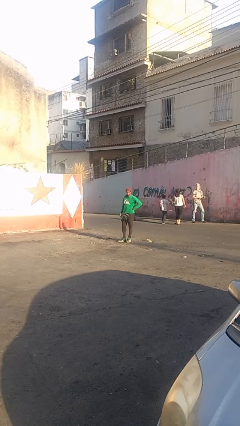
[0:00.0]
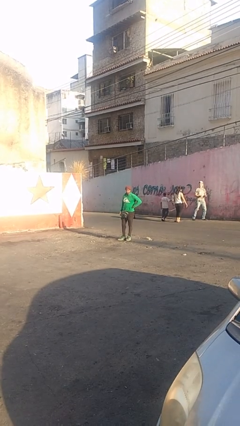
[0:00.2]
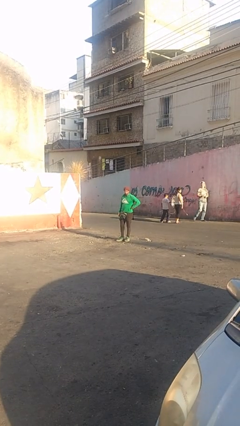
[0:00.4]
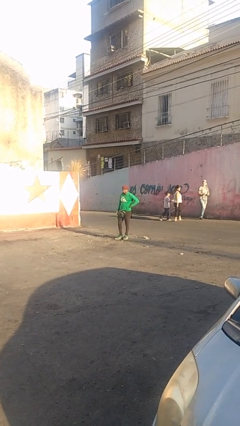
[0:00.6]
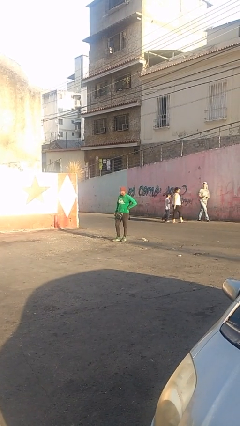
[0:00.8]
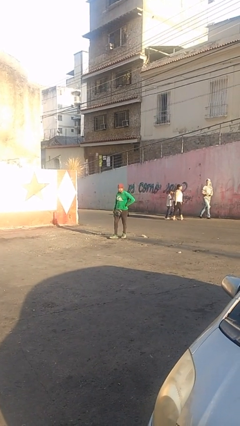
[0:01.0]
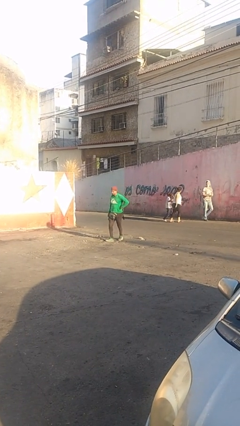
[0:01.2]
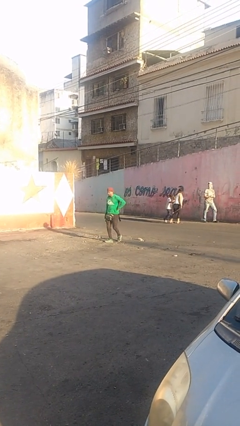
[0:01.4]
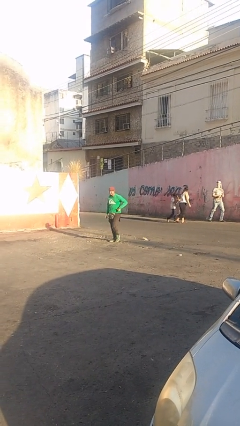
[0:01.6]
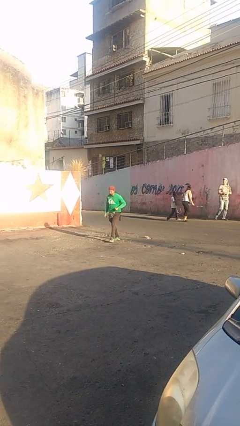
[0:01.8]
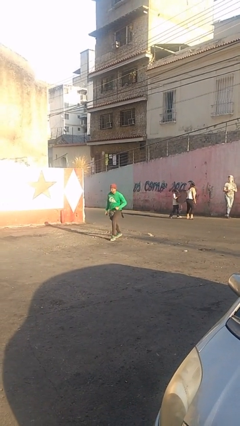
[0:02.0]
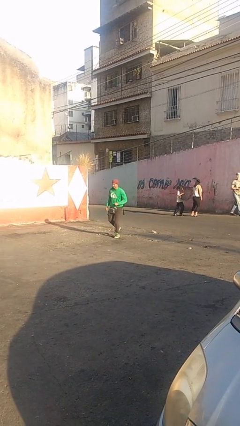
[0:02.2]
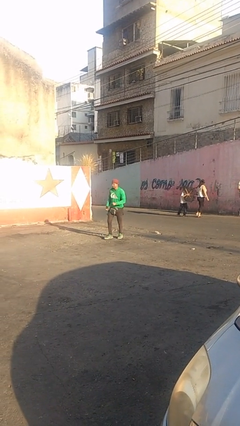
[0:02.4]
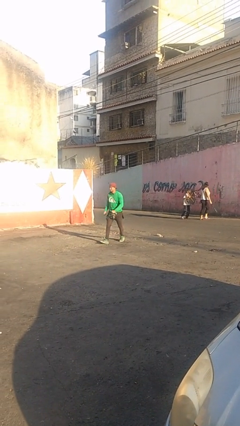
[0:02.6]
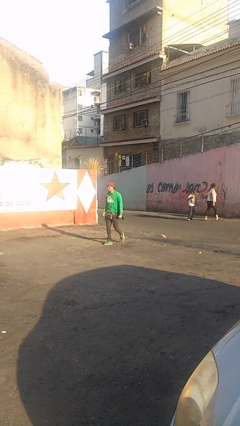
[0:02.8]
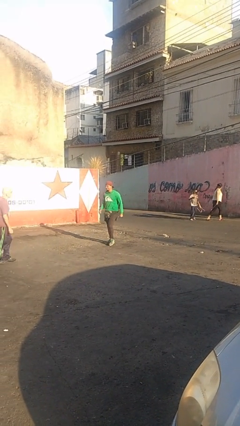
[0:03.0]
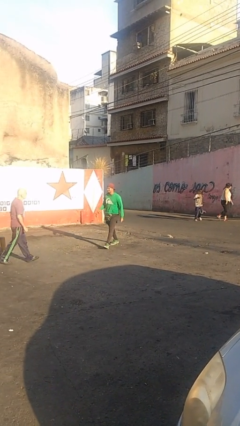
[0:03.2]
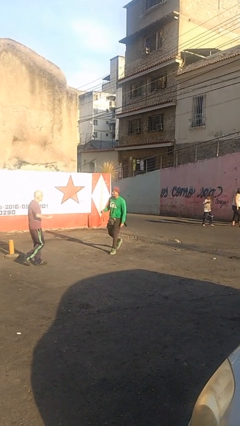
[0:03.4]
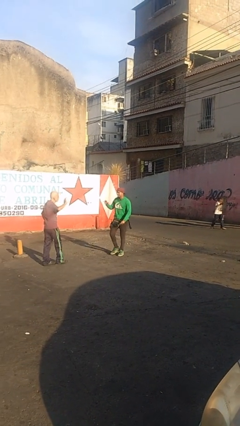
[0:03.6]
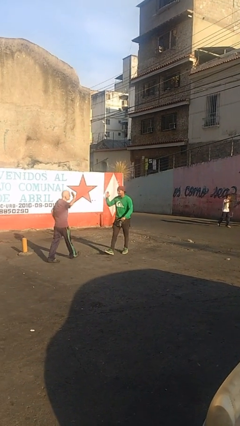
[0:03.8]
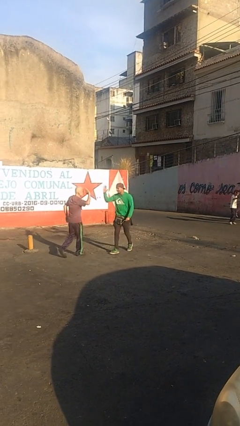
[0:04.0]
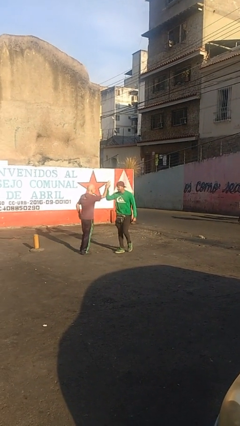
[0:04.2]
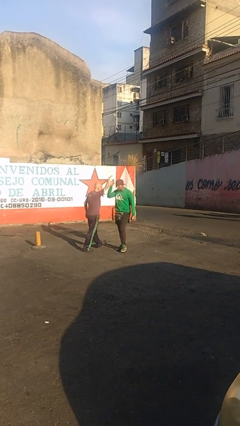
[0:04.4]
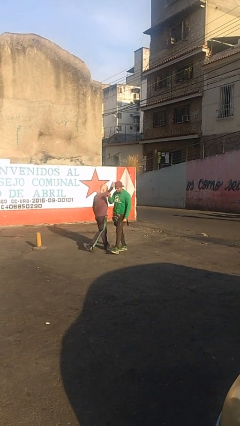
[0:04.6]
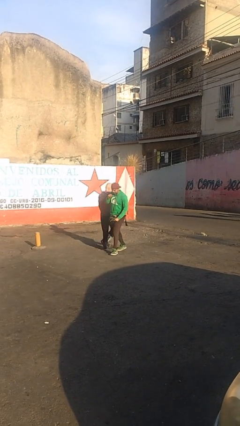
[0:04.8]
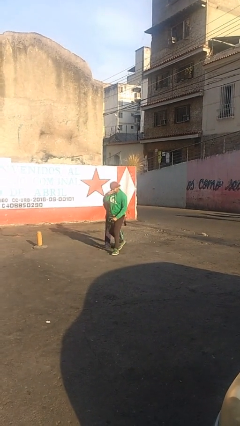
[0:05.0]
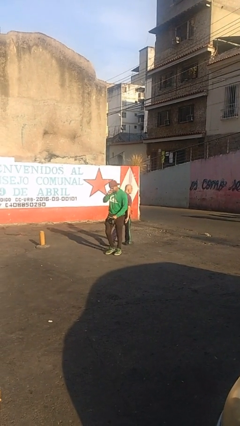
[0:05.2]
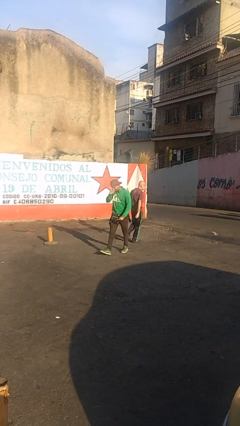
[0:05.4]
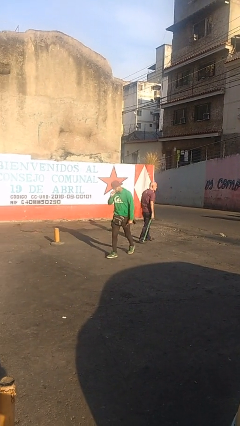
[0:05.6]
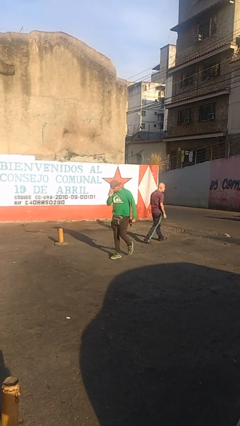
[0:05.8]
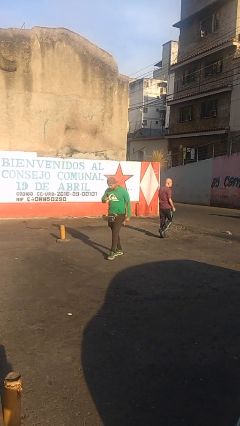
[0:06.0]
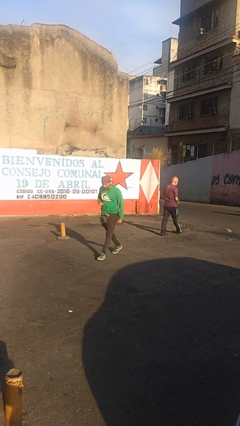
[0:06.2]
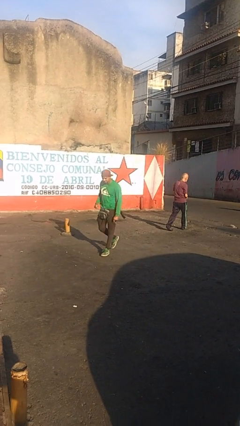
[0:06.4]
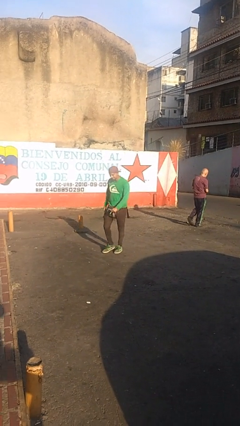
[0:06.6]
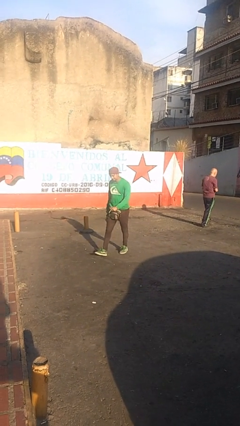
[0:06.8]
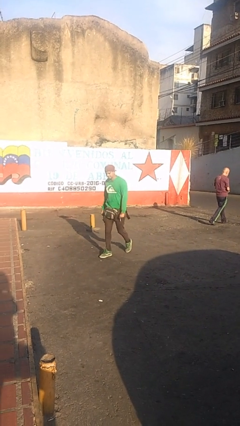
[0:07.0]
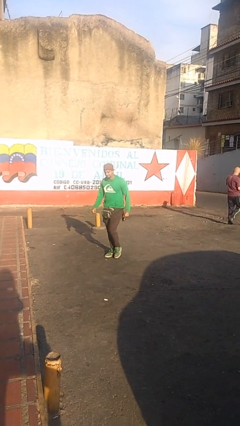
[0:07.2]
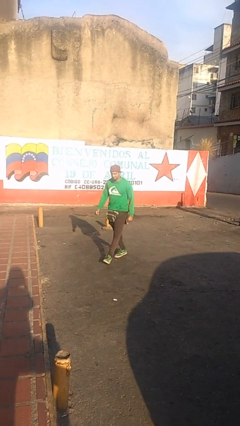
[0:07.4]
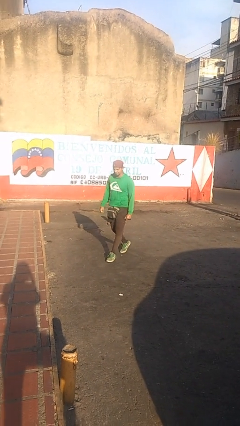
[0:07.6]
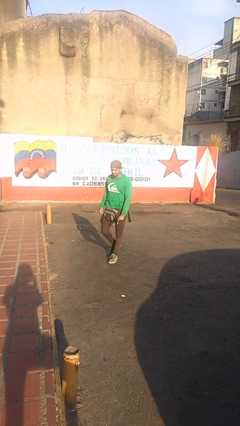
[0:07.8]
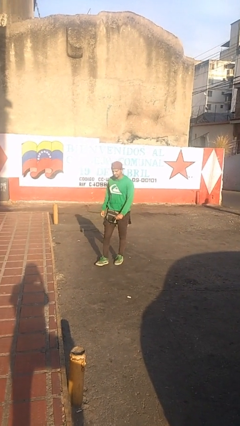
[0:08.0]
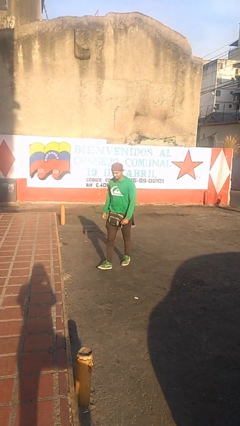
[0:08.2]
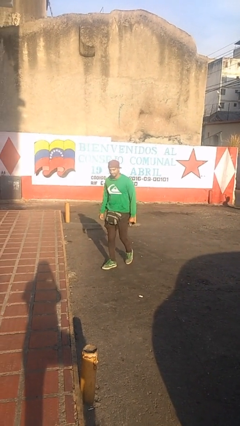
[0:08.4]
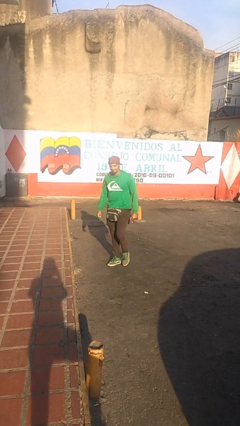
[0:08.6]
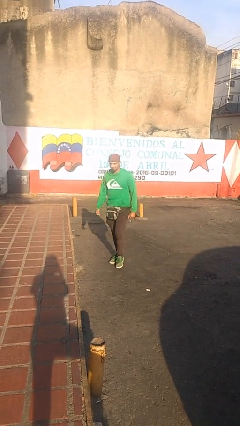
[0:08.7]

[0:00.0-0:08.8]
person highfives hand

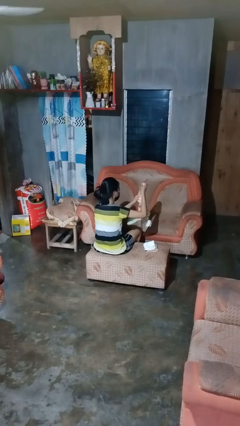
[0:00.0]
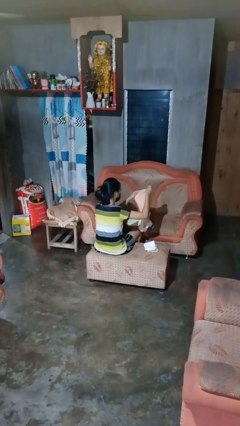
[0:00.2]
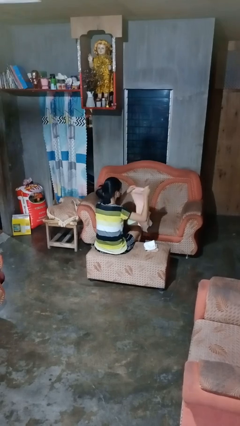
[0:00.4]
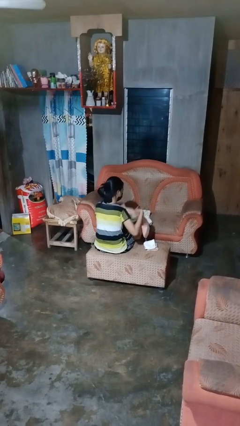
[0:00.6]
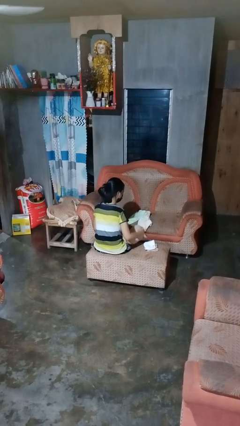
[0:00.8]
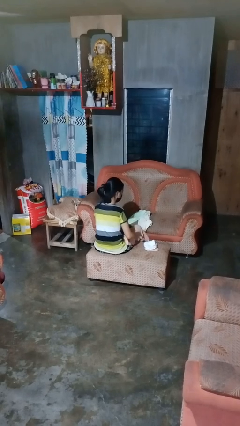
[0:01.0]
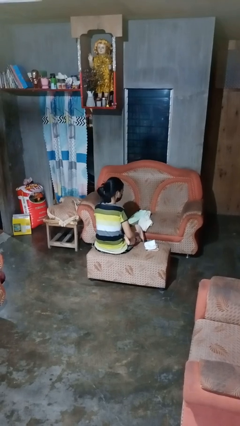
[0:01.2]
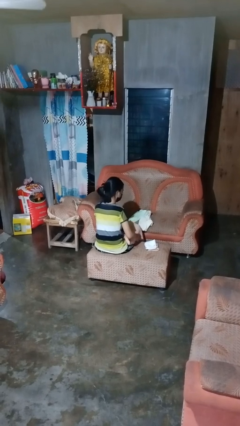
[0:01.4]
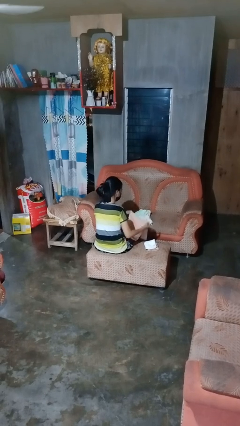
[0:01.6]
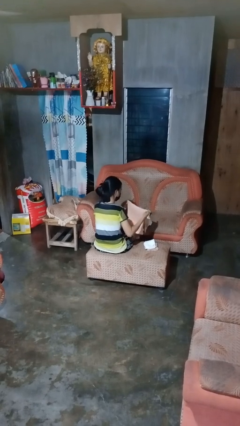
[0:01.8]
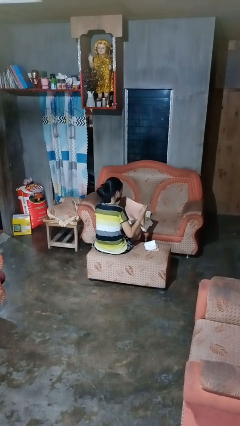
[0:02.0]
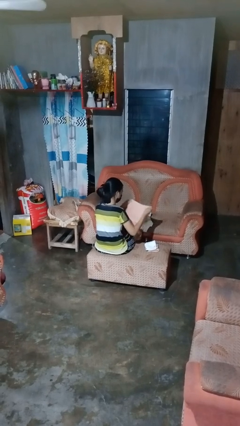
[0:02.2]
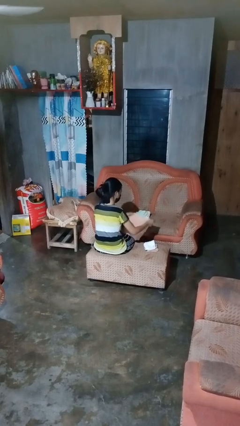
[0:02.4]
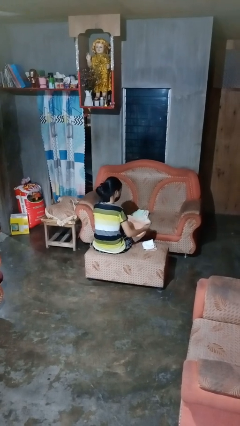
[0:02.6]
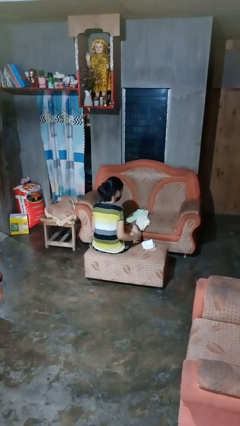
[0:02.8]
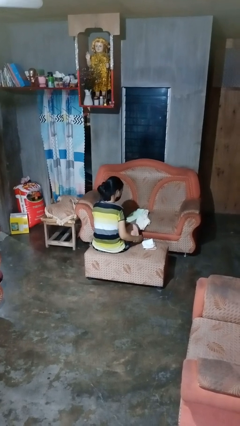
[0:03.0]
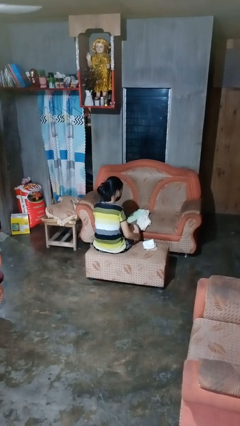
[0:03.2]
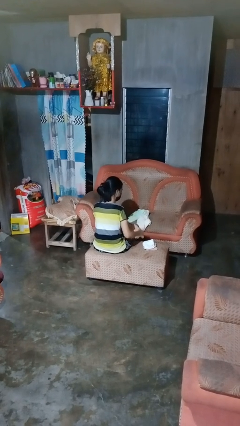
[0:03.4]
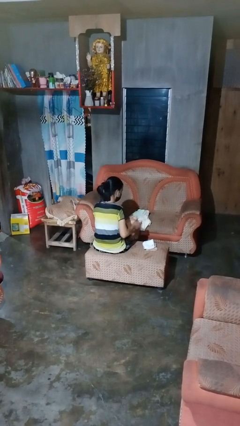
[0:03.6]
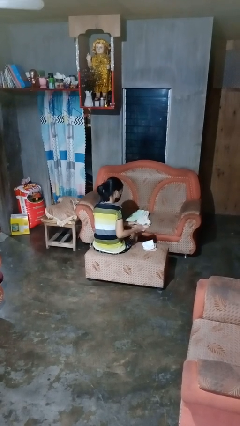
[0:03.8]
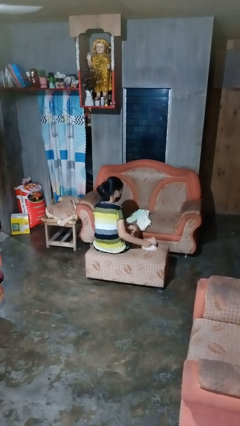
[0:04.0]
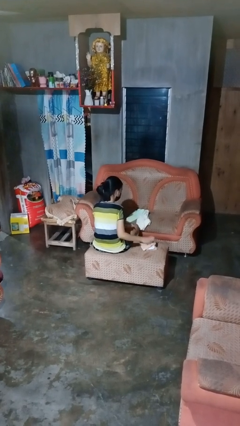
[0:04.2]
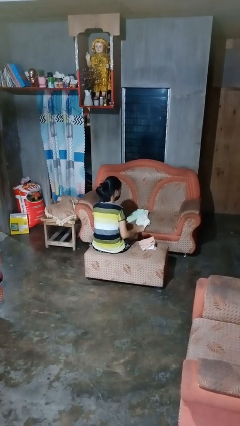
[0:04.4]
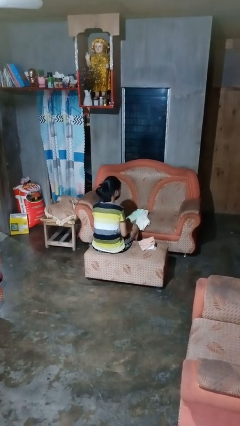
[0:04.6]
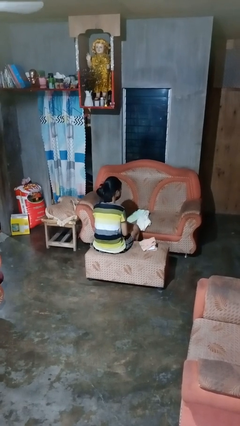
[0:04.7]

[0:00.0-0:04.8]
person folds towel

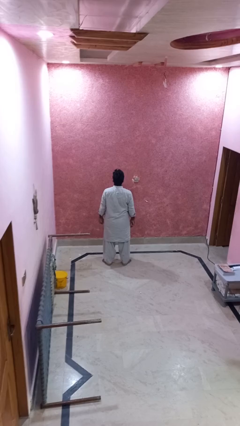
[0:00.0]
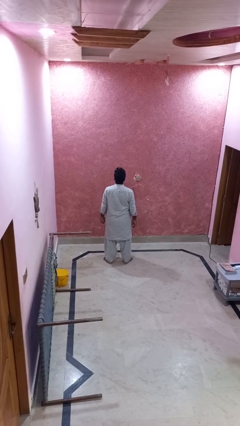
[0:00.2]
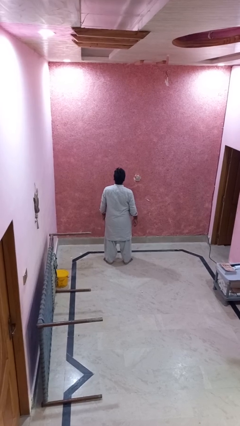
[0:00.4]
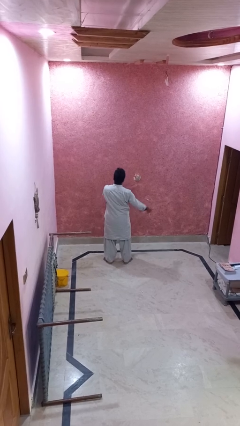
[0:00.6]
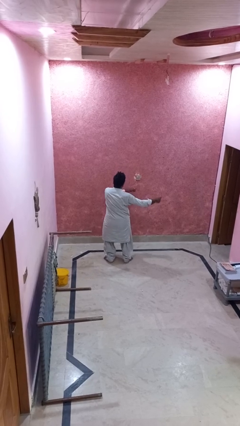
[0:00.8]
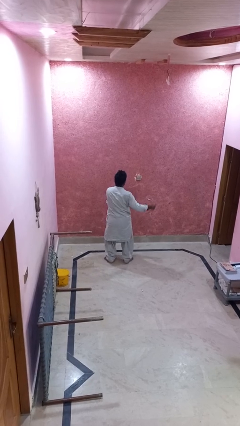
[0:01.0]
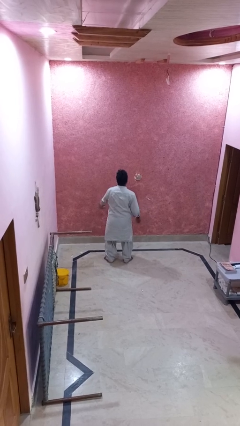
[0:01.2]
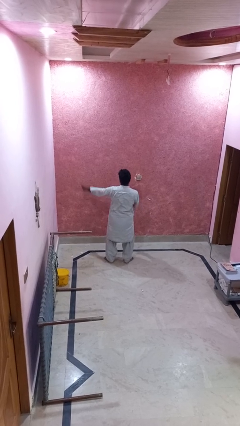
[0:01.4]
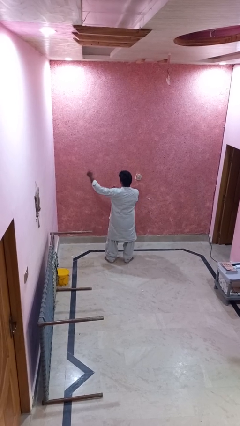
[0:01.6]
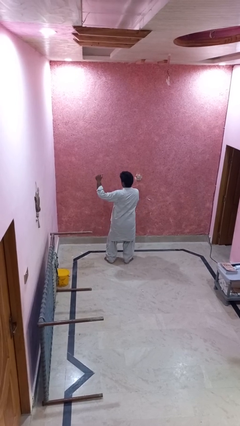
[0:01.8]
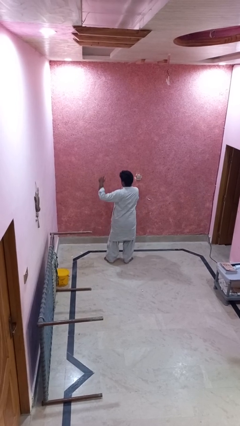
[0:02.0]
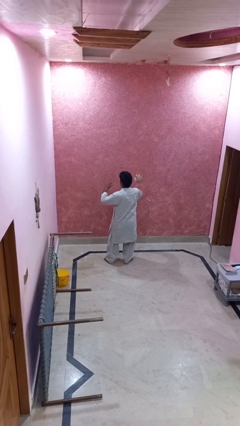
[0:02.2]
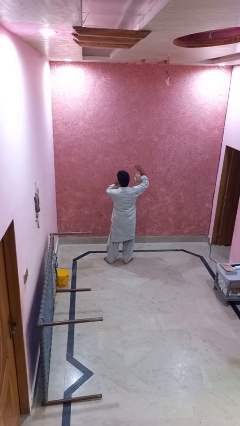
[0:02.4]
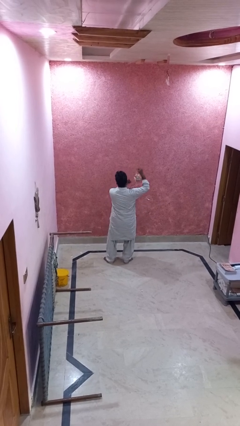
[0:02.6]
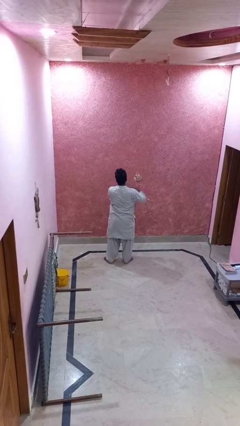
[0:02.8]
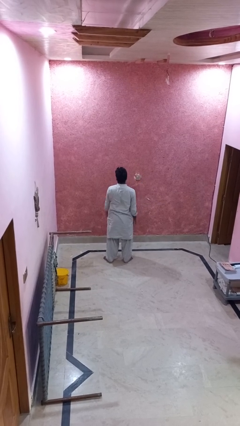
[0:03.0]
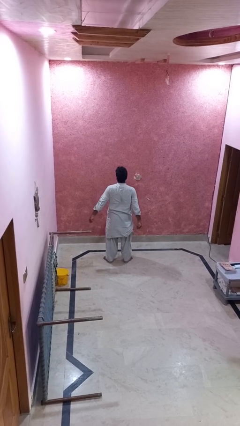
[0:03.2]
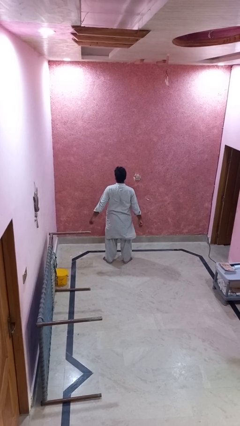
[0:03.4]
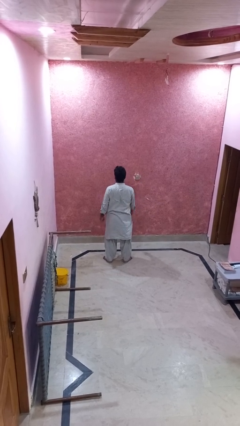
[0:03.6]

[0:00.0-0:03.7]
person dances in place

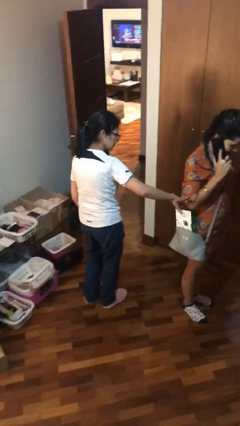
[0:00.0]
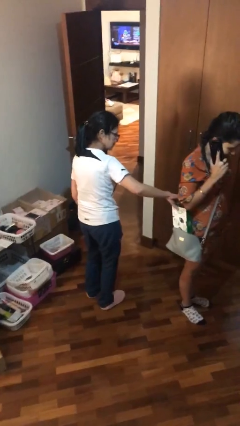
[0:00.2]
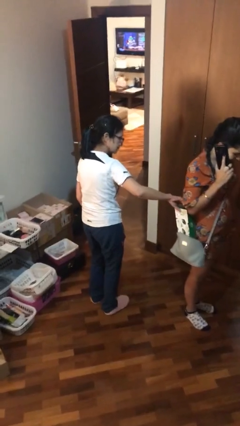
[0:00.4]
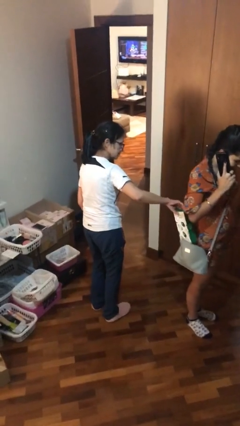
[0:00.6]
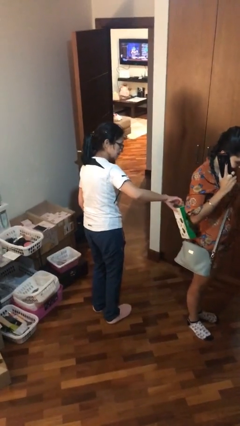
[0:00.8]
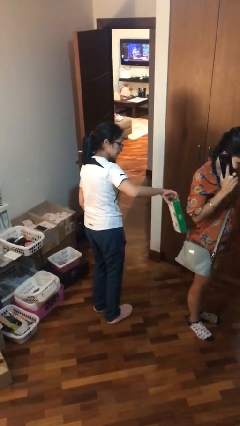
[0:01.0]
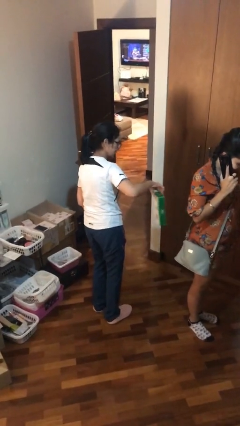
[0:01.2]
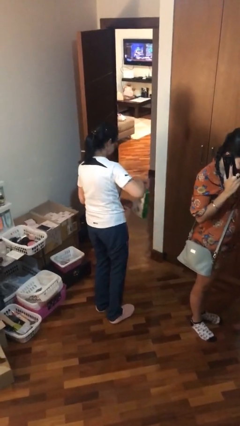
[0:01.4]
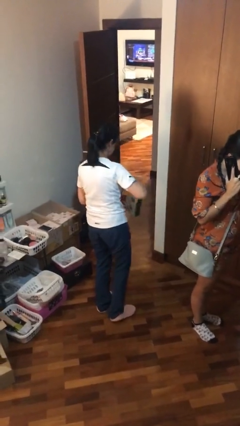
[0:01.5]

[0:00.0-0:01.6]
person steals object from person
